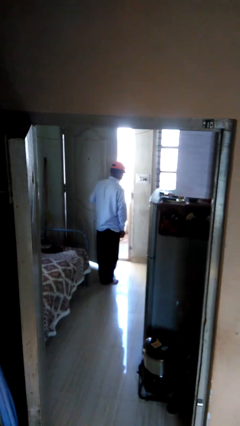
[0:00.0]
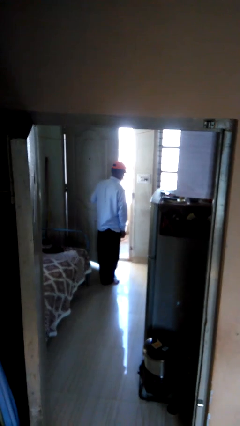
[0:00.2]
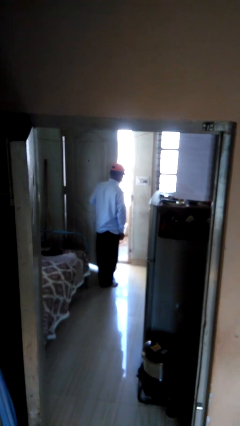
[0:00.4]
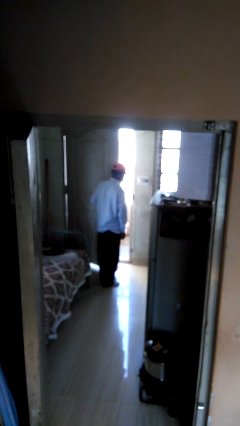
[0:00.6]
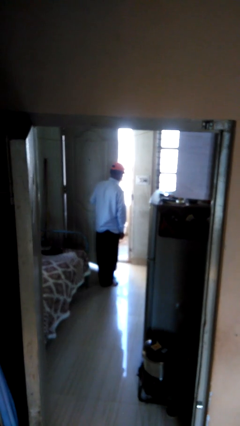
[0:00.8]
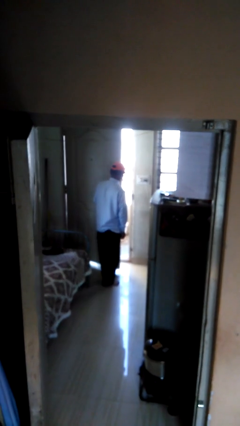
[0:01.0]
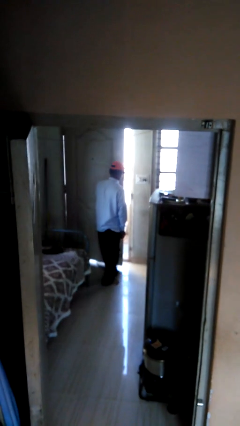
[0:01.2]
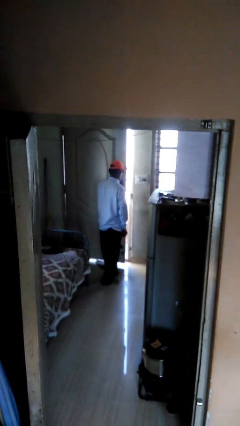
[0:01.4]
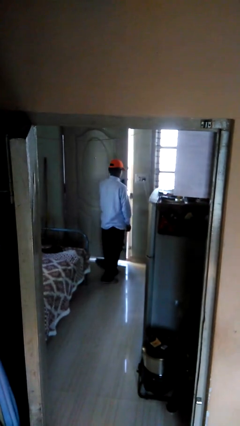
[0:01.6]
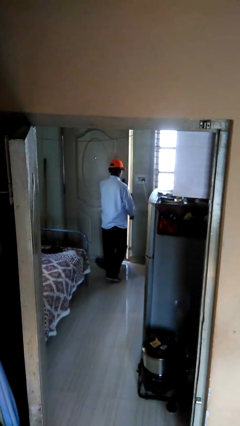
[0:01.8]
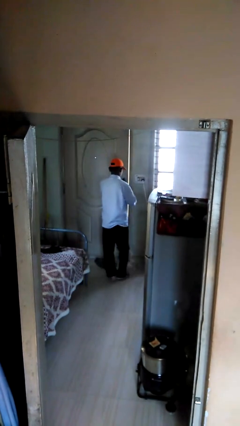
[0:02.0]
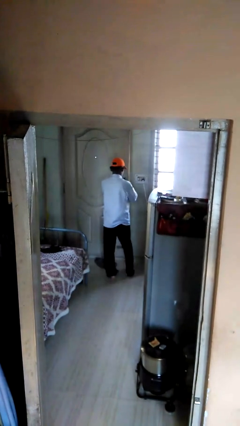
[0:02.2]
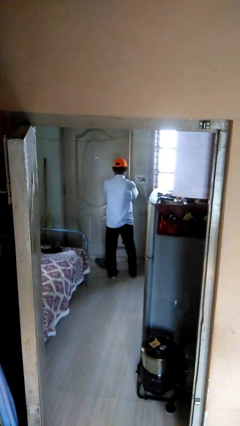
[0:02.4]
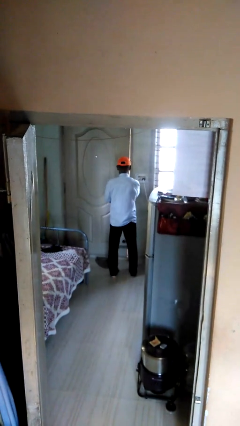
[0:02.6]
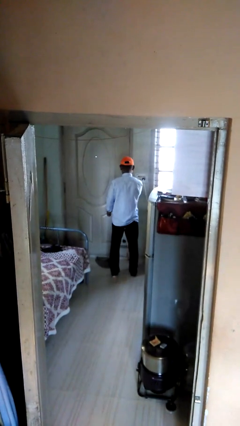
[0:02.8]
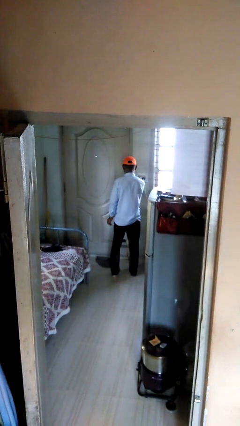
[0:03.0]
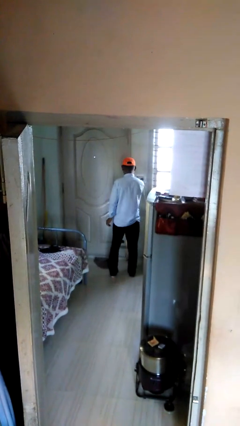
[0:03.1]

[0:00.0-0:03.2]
person closes facility door

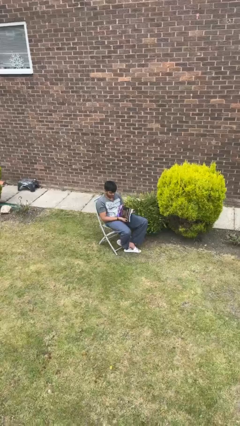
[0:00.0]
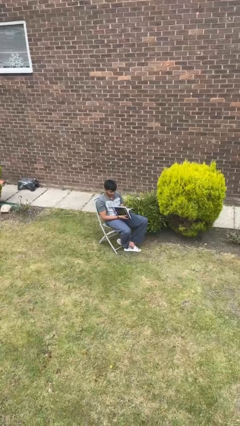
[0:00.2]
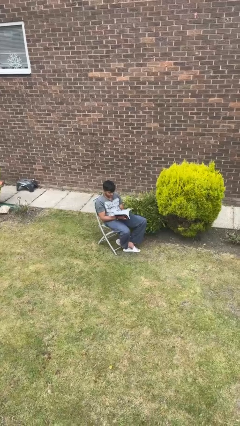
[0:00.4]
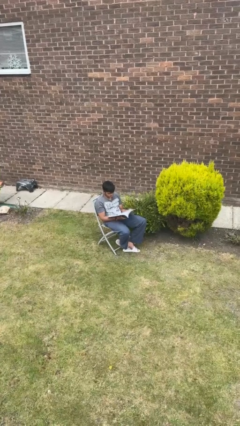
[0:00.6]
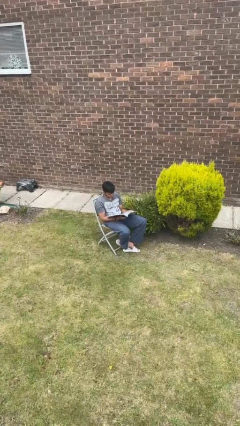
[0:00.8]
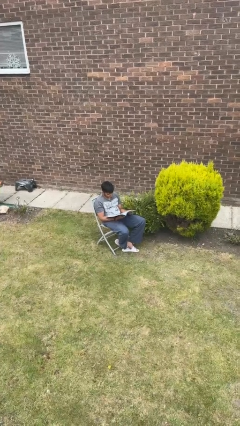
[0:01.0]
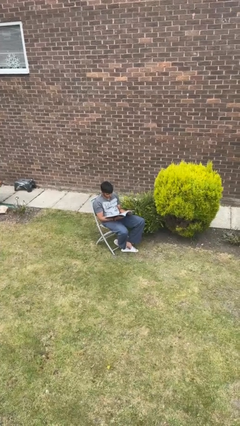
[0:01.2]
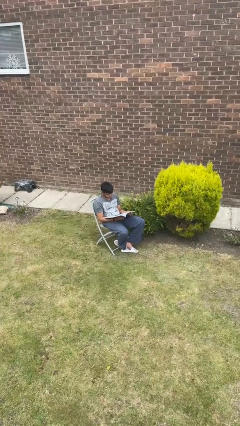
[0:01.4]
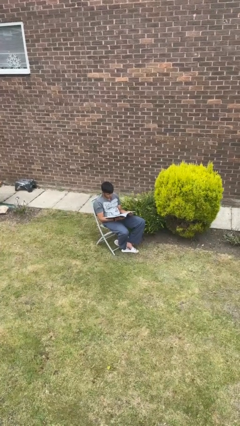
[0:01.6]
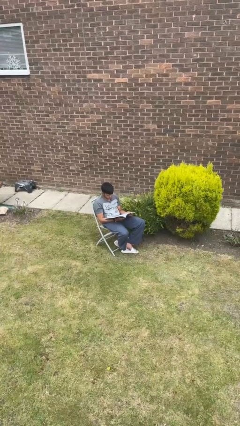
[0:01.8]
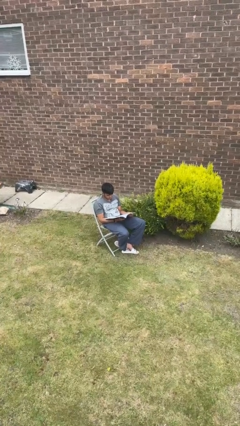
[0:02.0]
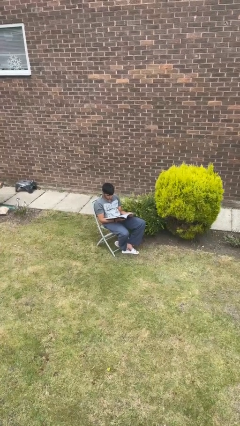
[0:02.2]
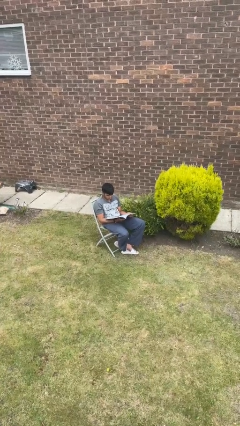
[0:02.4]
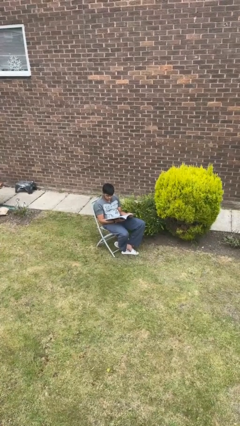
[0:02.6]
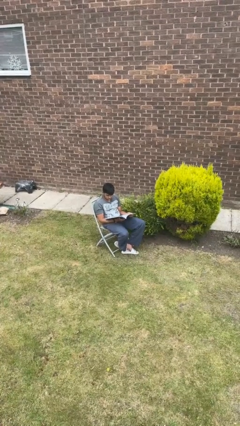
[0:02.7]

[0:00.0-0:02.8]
person reads magazine

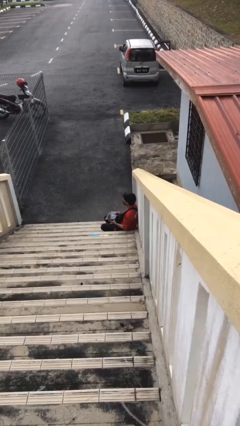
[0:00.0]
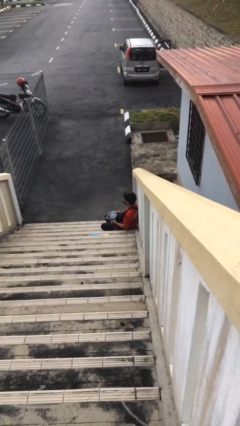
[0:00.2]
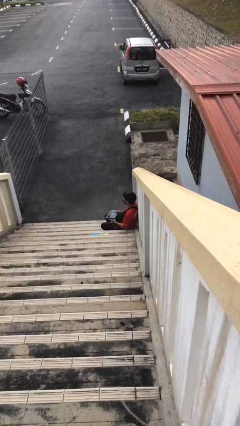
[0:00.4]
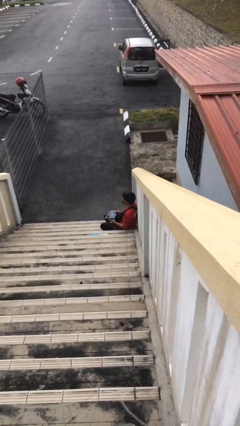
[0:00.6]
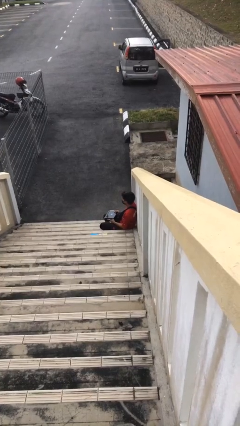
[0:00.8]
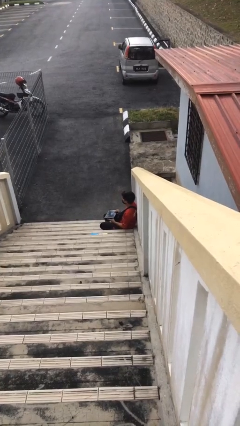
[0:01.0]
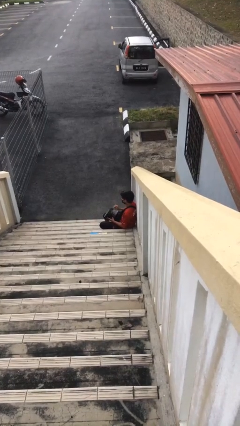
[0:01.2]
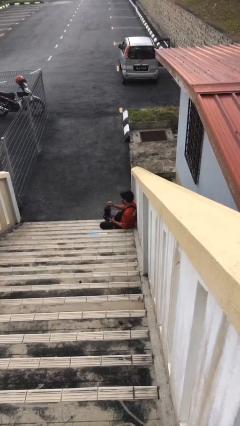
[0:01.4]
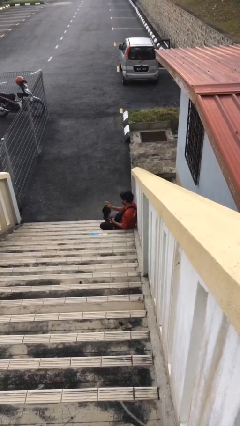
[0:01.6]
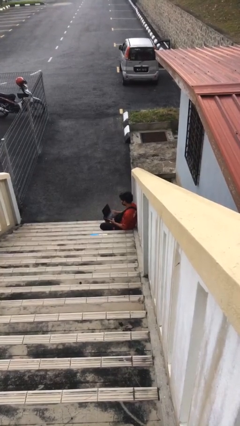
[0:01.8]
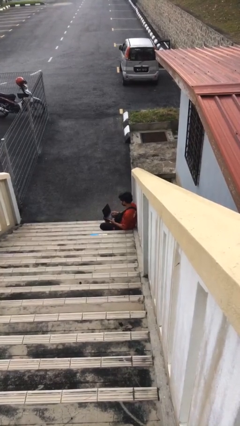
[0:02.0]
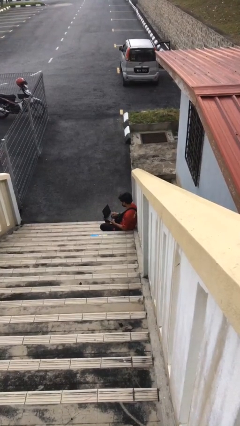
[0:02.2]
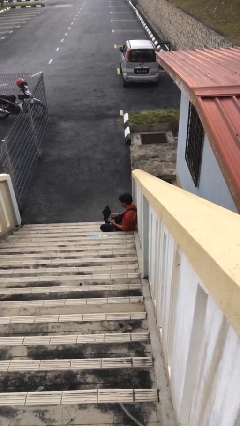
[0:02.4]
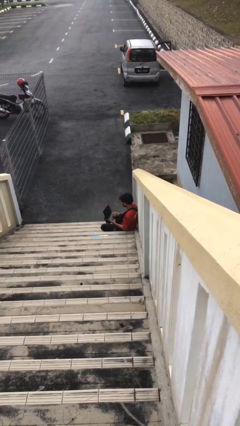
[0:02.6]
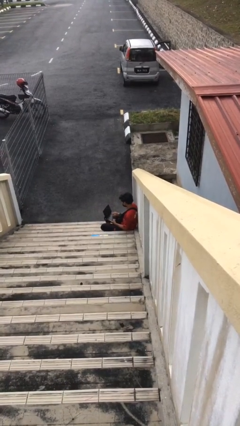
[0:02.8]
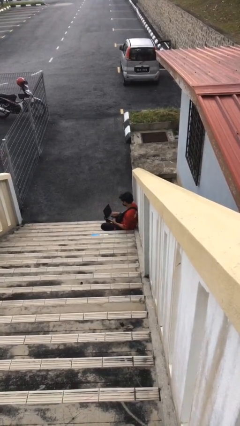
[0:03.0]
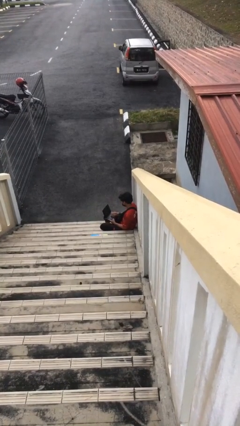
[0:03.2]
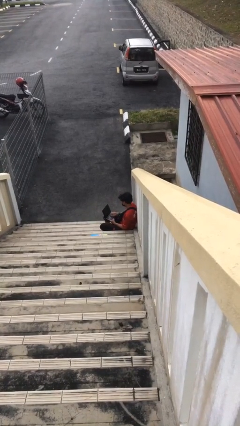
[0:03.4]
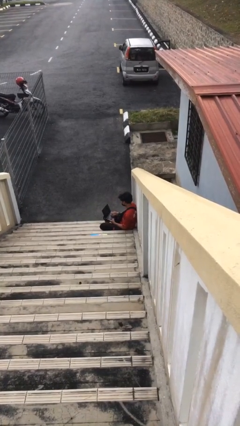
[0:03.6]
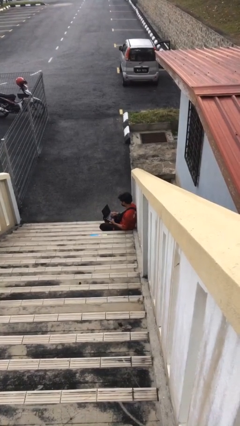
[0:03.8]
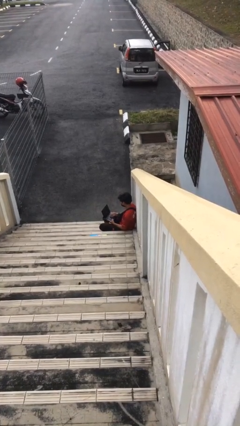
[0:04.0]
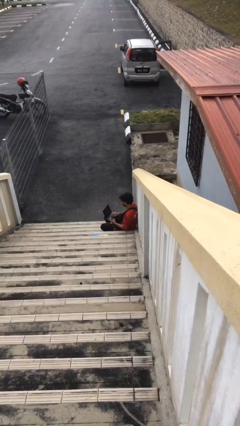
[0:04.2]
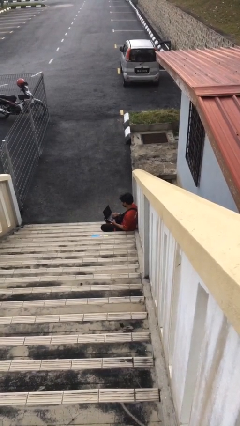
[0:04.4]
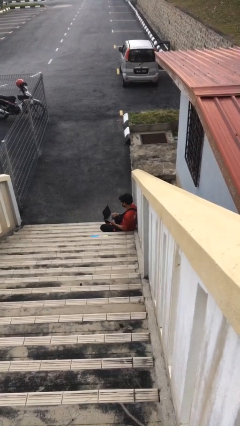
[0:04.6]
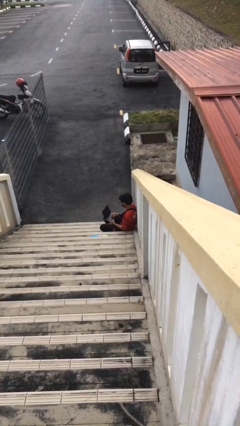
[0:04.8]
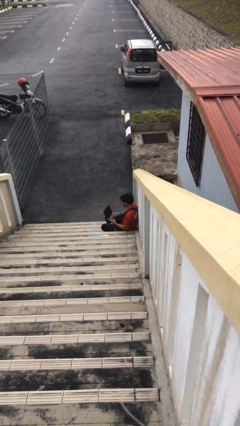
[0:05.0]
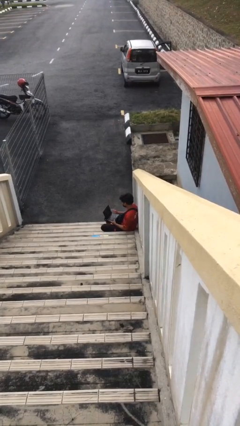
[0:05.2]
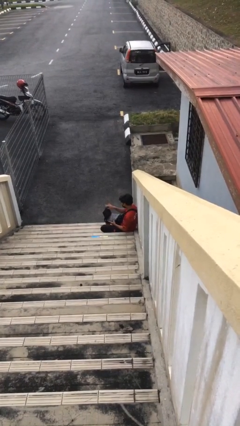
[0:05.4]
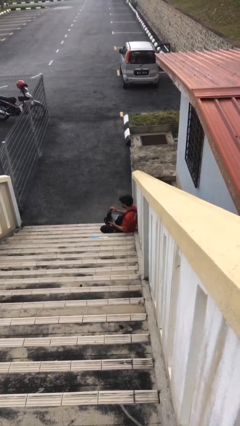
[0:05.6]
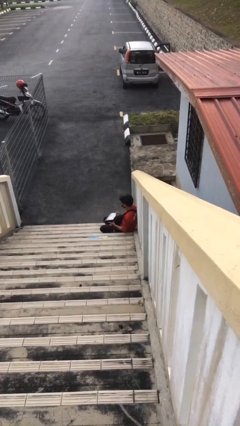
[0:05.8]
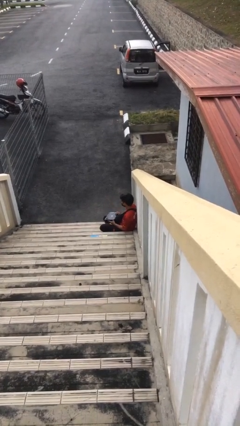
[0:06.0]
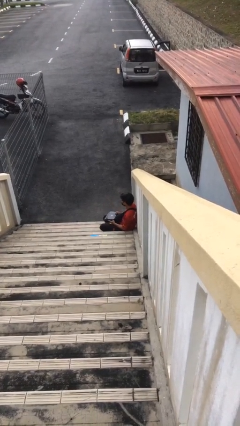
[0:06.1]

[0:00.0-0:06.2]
person interacts with laptop

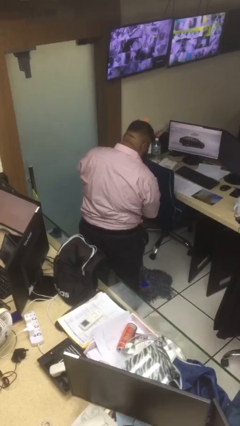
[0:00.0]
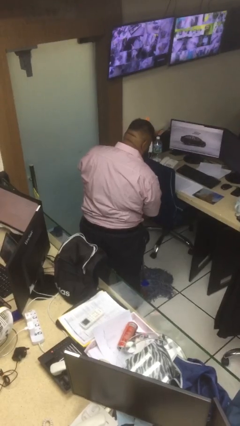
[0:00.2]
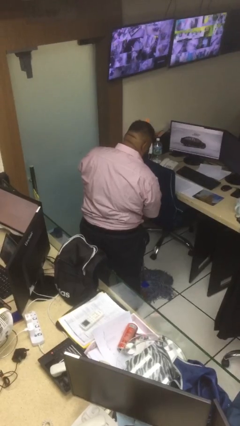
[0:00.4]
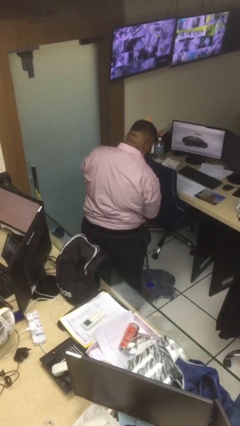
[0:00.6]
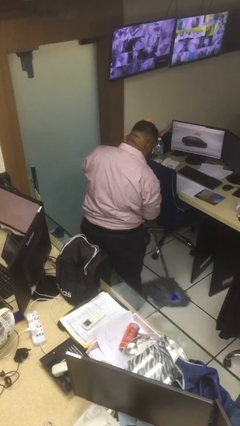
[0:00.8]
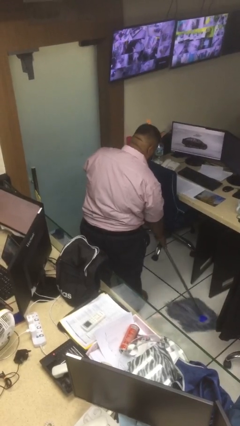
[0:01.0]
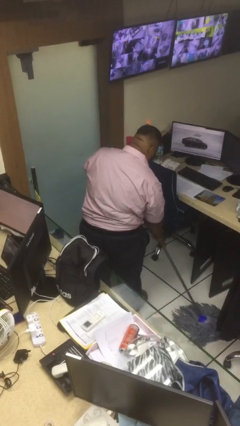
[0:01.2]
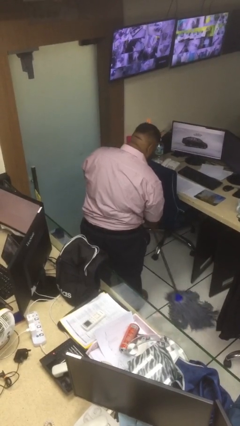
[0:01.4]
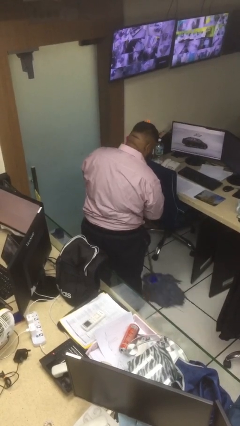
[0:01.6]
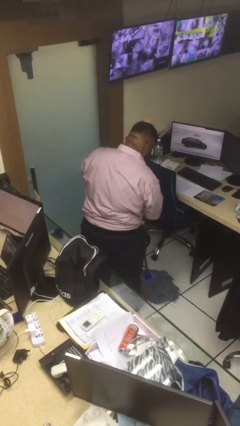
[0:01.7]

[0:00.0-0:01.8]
person mops

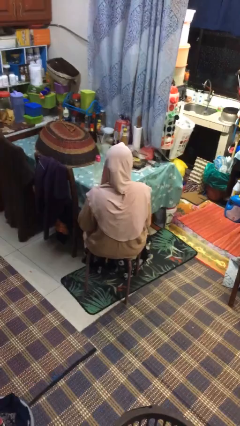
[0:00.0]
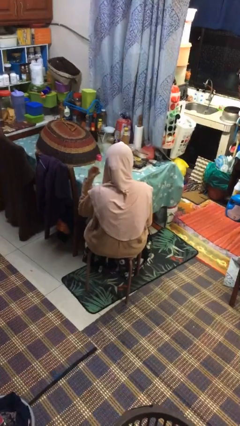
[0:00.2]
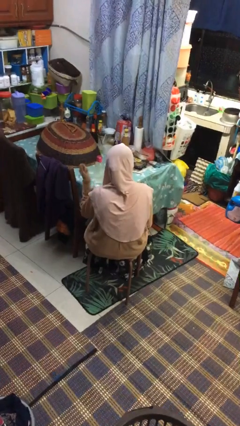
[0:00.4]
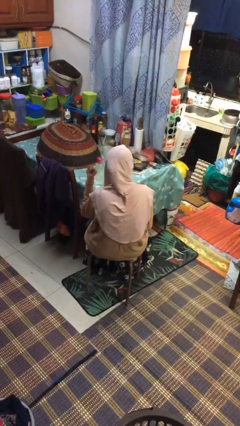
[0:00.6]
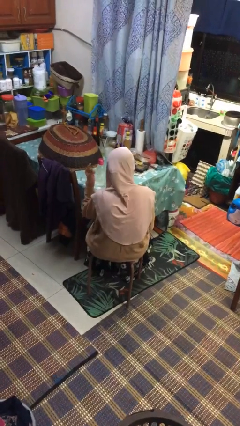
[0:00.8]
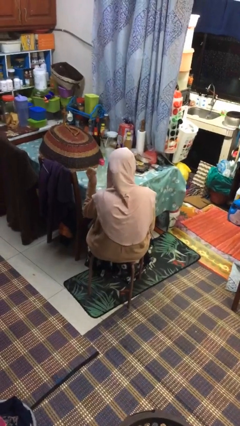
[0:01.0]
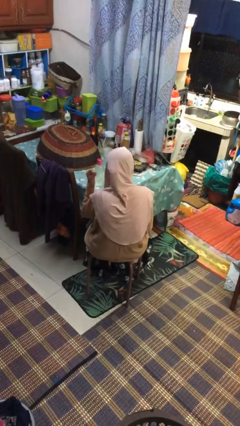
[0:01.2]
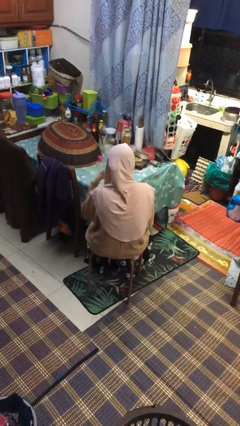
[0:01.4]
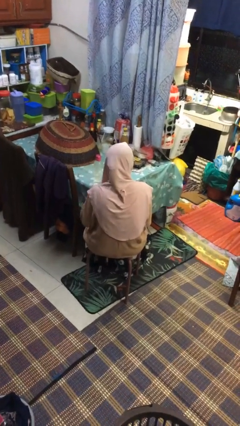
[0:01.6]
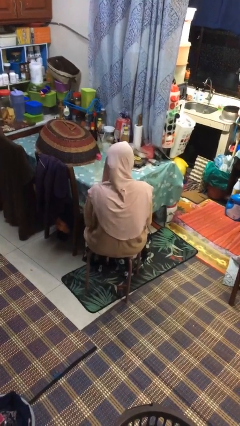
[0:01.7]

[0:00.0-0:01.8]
person snaps fingers

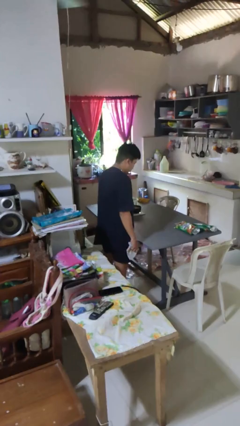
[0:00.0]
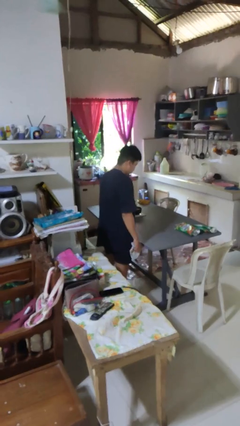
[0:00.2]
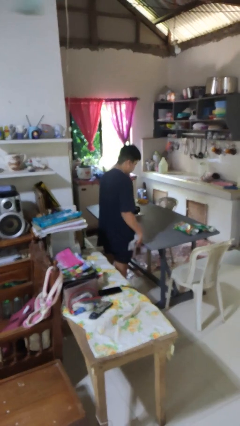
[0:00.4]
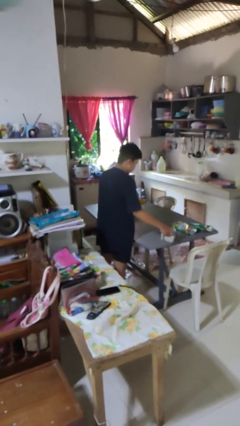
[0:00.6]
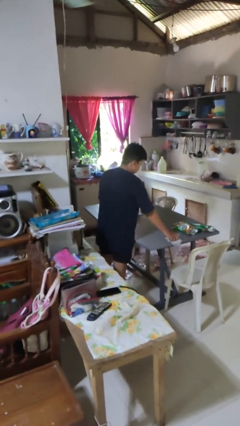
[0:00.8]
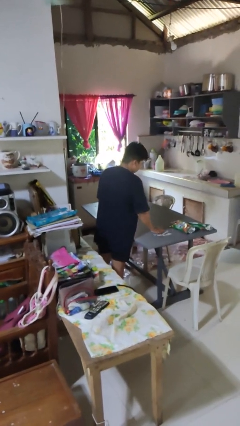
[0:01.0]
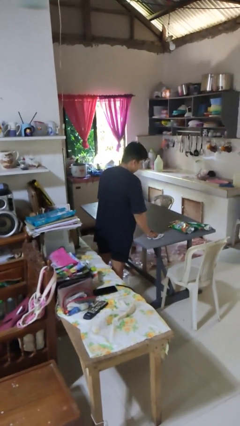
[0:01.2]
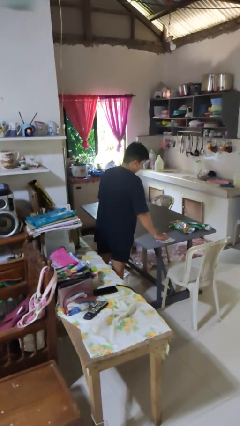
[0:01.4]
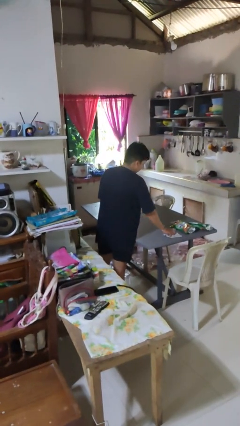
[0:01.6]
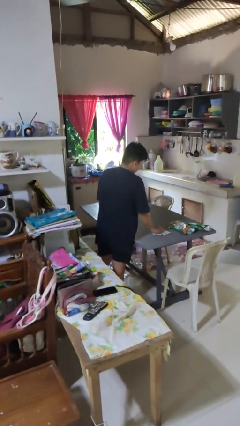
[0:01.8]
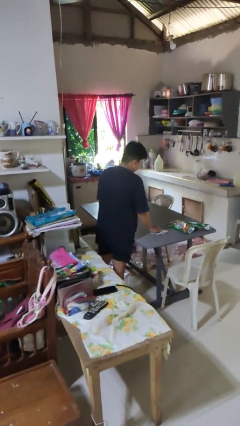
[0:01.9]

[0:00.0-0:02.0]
person cleans table with rag
